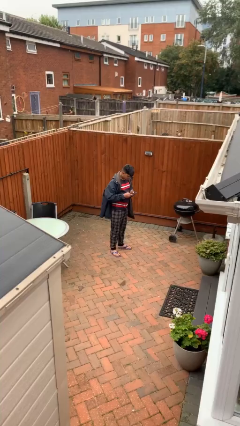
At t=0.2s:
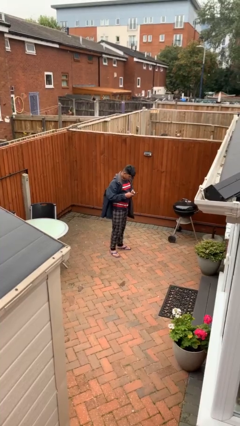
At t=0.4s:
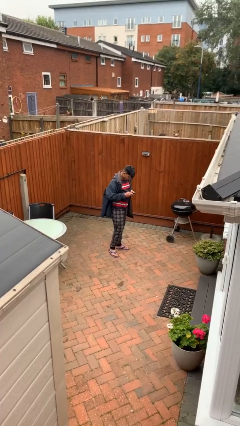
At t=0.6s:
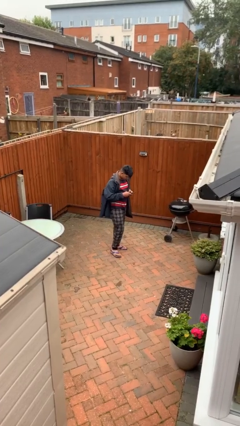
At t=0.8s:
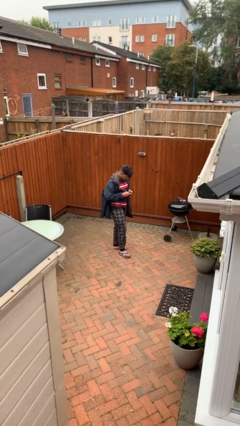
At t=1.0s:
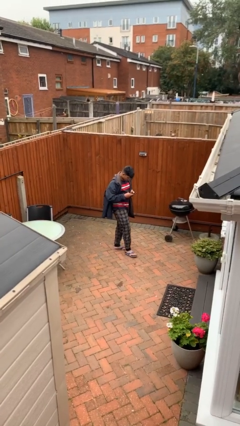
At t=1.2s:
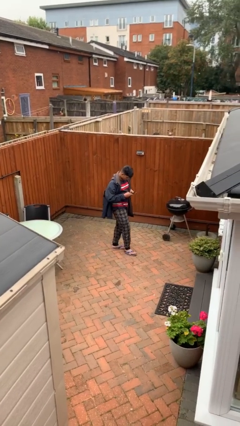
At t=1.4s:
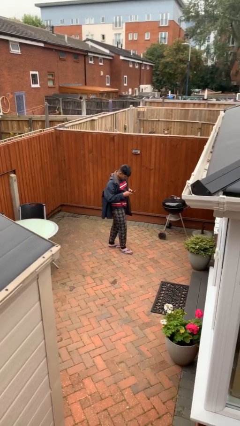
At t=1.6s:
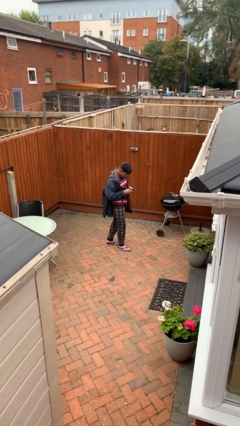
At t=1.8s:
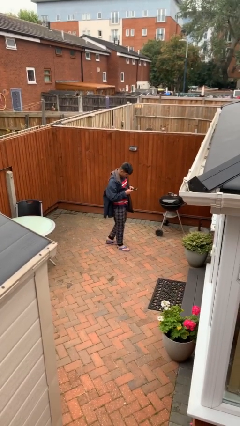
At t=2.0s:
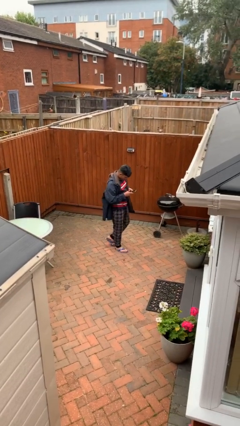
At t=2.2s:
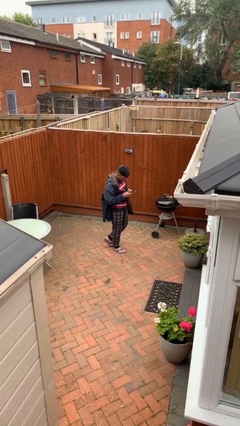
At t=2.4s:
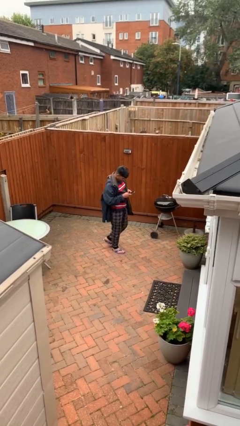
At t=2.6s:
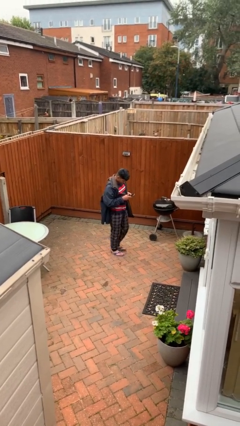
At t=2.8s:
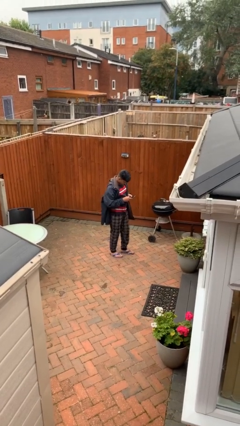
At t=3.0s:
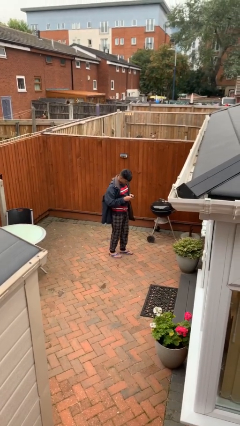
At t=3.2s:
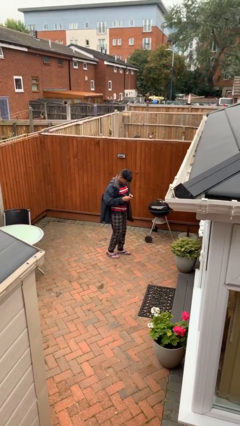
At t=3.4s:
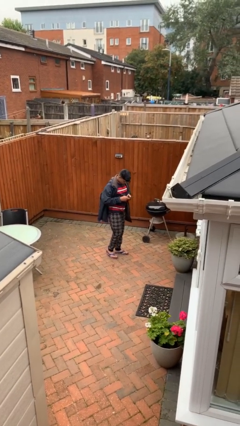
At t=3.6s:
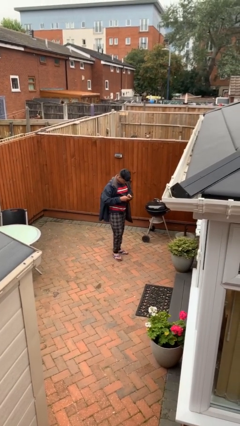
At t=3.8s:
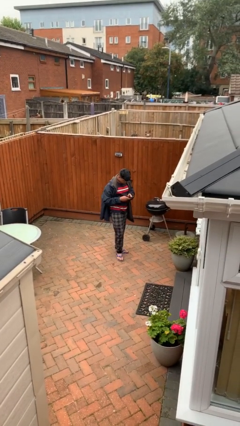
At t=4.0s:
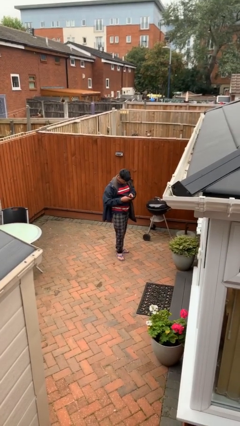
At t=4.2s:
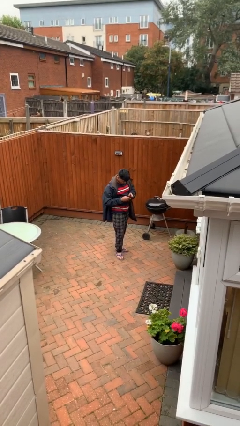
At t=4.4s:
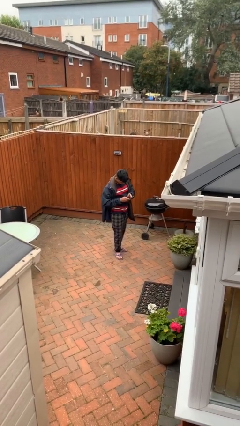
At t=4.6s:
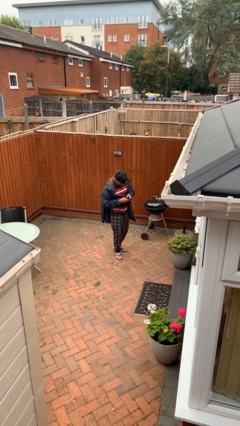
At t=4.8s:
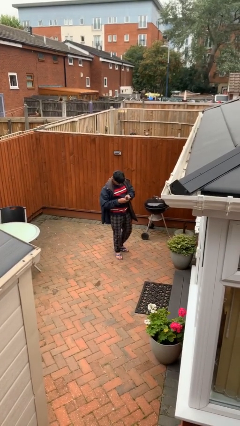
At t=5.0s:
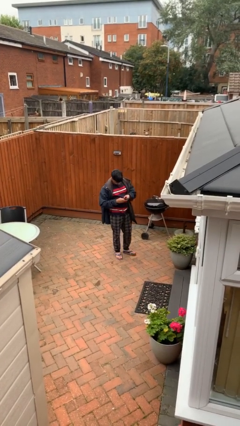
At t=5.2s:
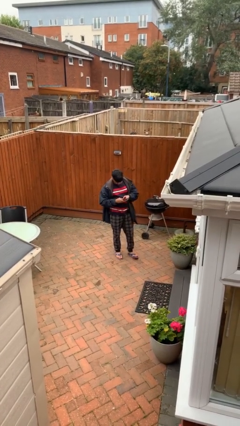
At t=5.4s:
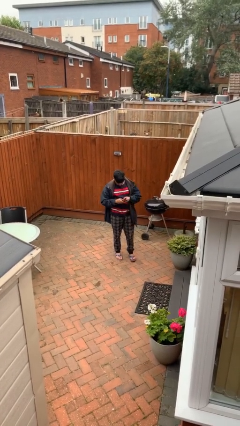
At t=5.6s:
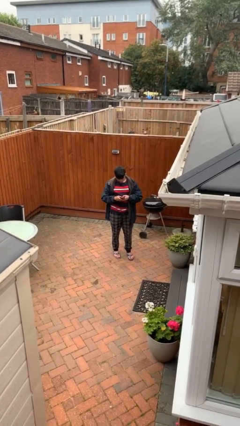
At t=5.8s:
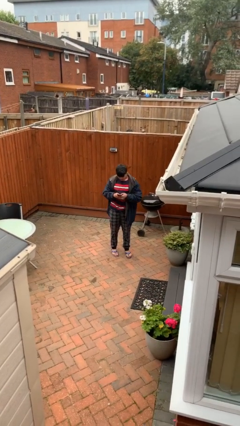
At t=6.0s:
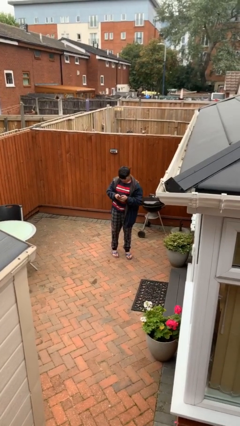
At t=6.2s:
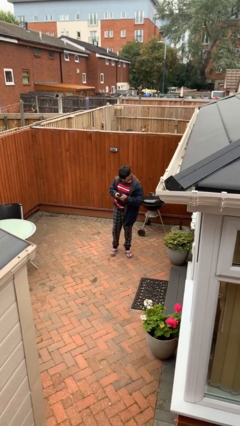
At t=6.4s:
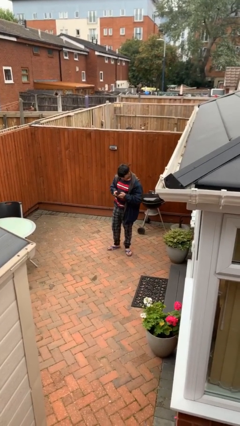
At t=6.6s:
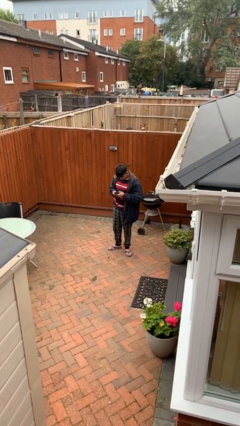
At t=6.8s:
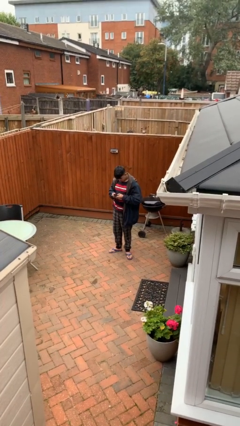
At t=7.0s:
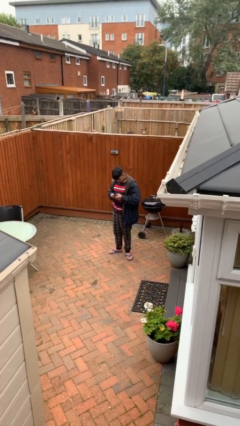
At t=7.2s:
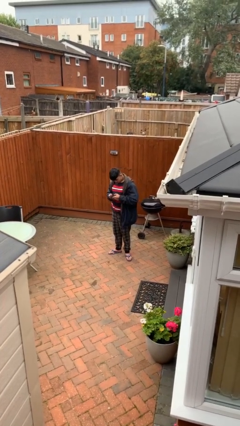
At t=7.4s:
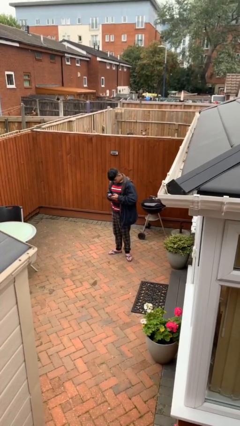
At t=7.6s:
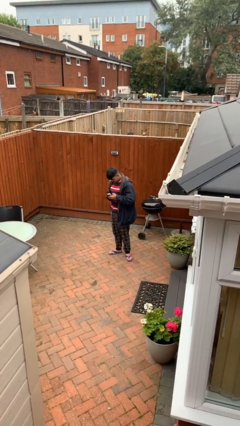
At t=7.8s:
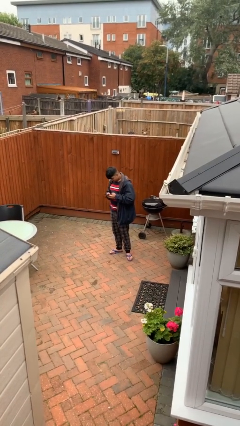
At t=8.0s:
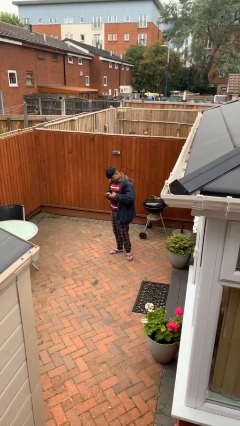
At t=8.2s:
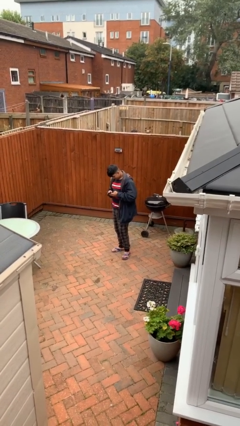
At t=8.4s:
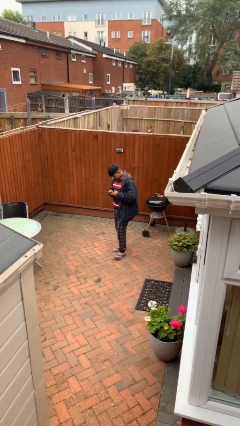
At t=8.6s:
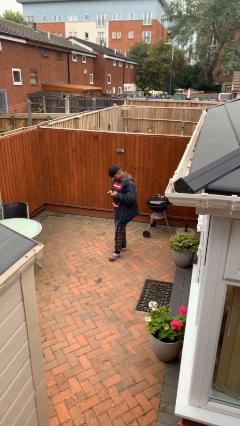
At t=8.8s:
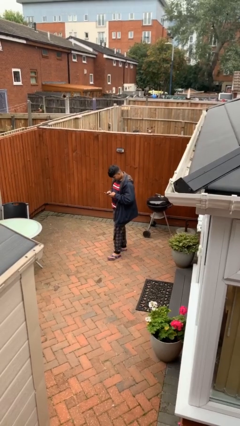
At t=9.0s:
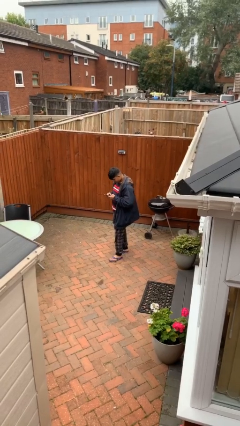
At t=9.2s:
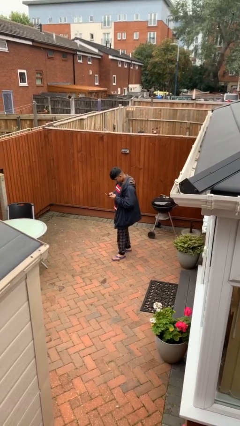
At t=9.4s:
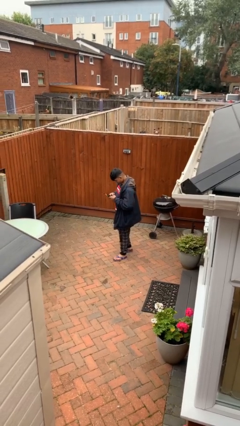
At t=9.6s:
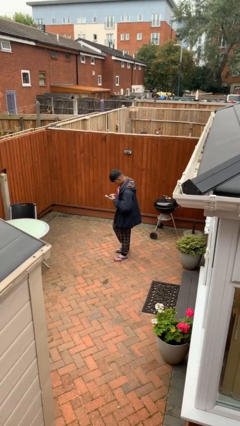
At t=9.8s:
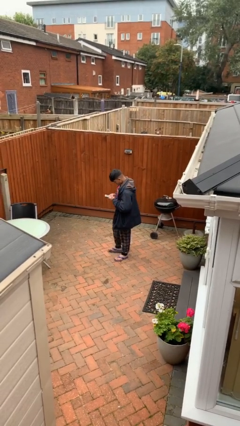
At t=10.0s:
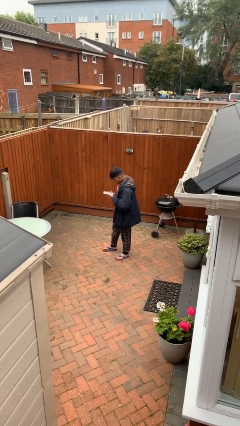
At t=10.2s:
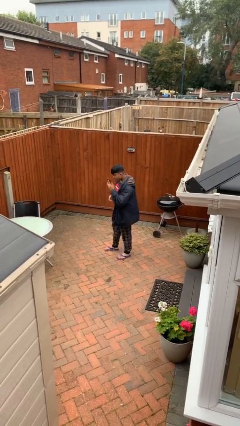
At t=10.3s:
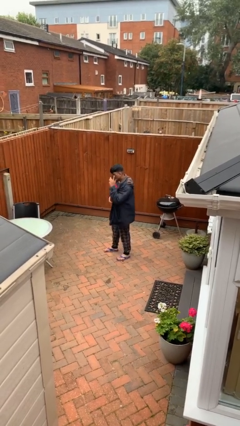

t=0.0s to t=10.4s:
person texts on phone

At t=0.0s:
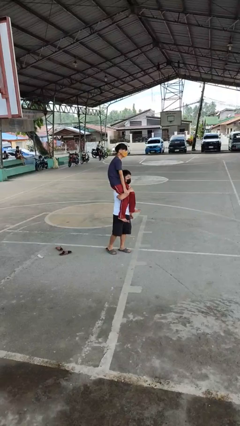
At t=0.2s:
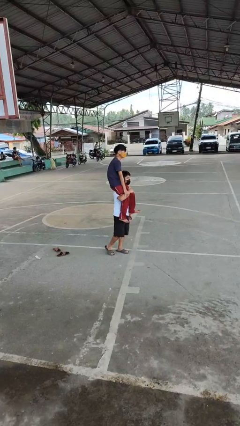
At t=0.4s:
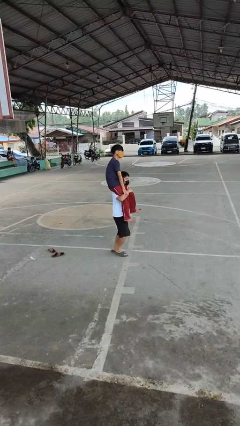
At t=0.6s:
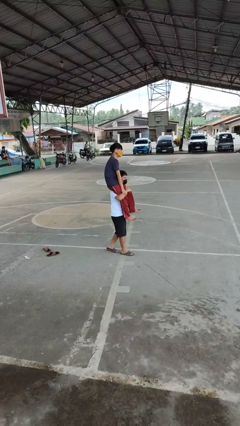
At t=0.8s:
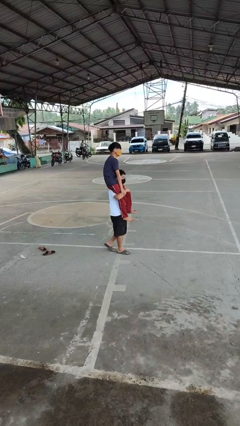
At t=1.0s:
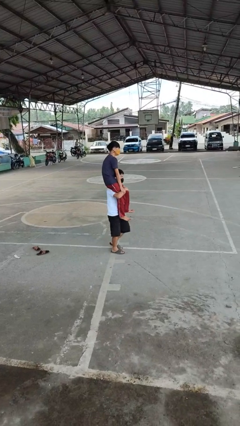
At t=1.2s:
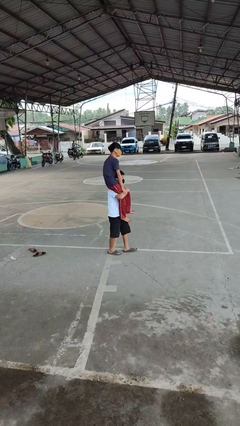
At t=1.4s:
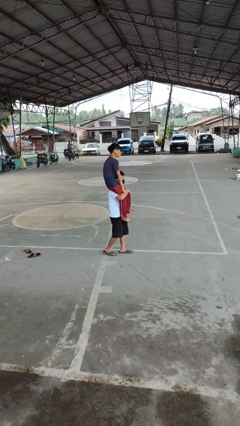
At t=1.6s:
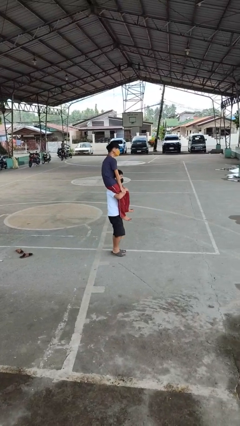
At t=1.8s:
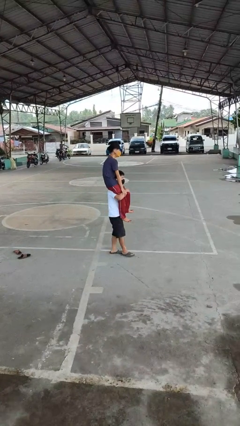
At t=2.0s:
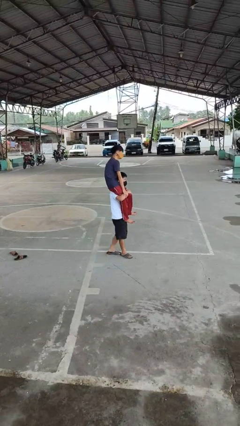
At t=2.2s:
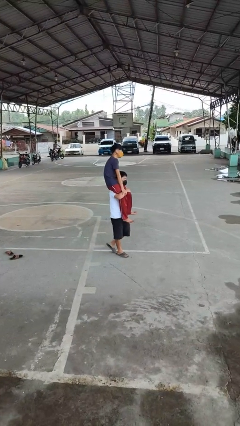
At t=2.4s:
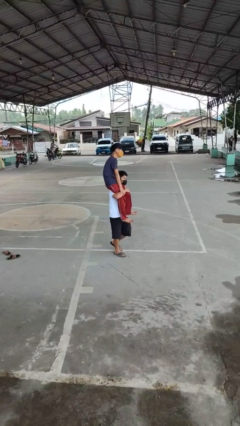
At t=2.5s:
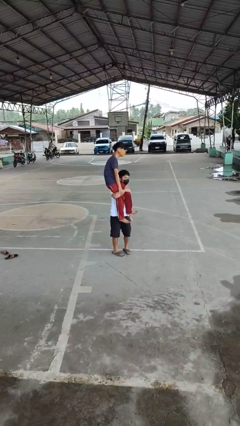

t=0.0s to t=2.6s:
person carries person on shoulders

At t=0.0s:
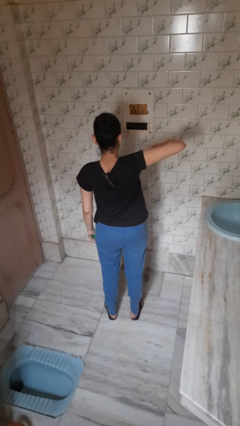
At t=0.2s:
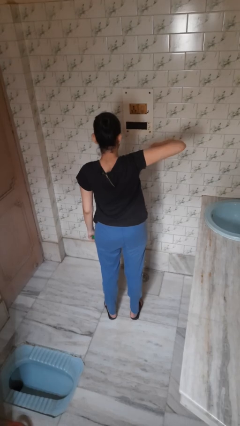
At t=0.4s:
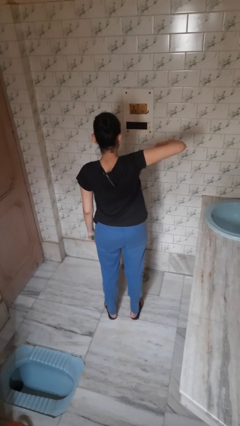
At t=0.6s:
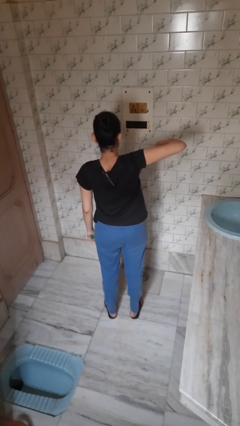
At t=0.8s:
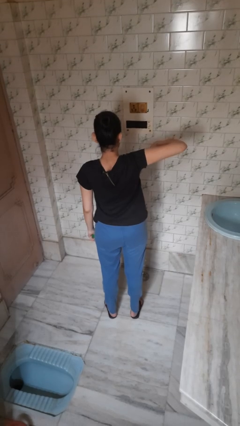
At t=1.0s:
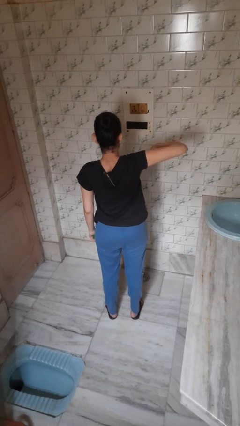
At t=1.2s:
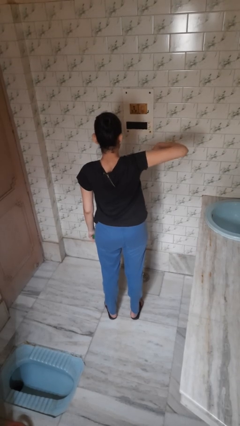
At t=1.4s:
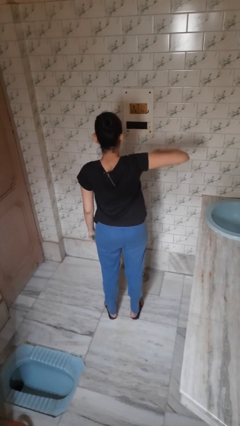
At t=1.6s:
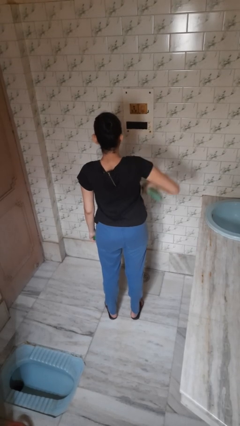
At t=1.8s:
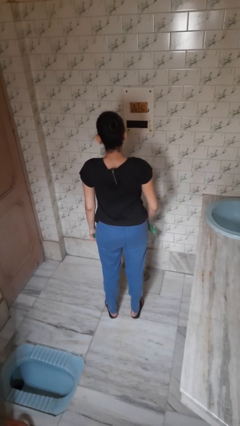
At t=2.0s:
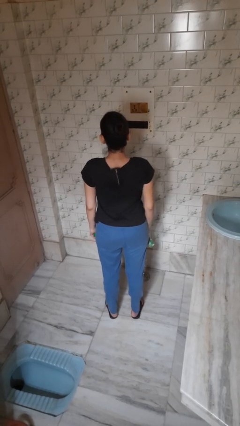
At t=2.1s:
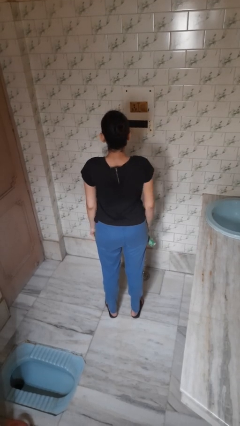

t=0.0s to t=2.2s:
person applies deodorant

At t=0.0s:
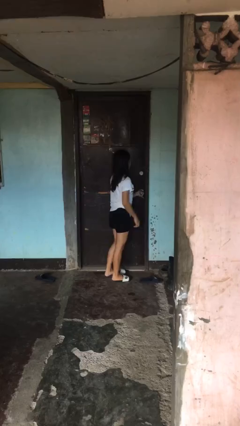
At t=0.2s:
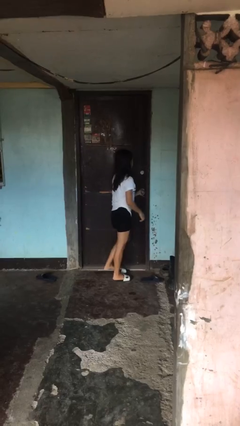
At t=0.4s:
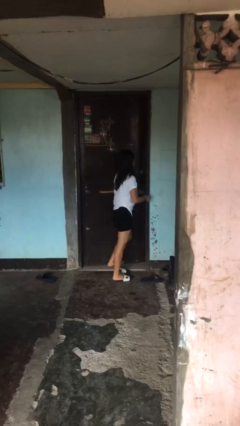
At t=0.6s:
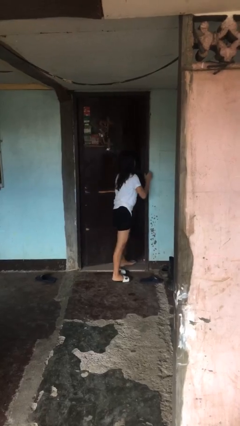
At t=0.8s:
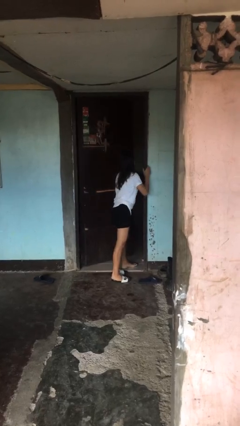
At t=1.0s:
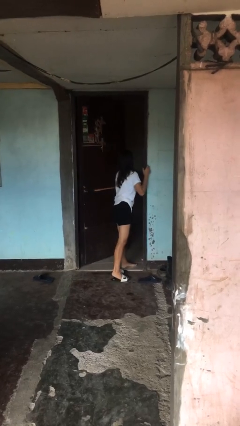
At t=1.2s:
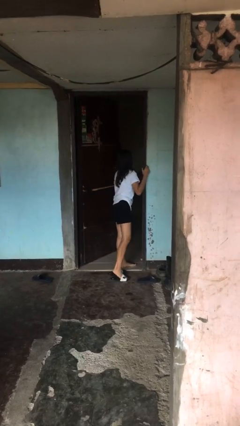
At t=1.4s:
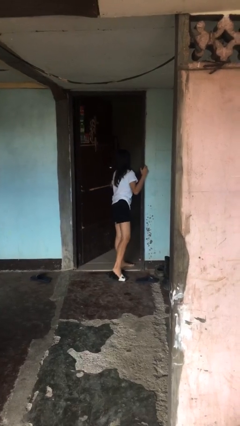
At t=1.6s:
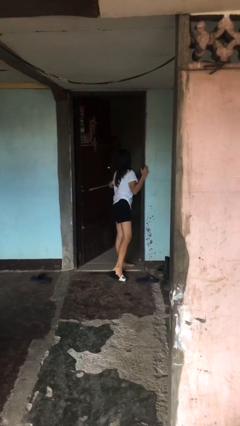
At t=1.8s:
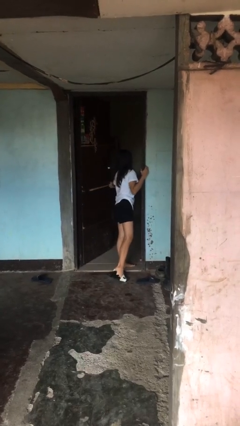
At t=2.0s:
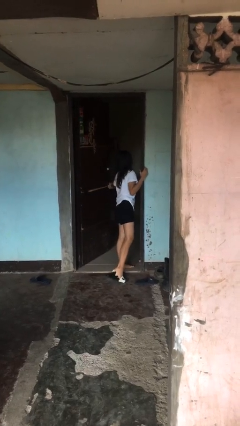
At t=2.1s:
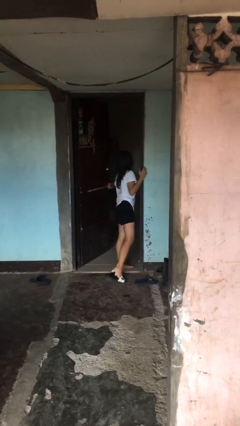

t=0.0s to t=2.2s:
person opens facility door

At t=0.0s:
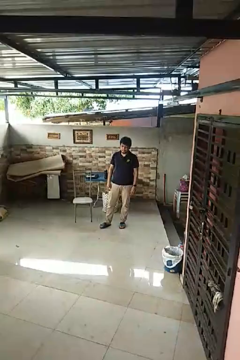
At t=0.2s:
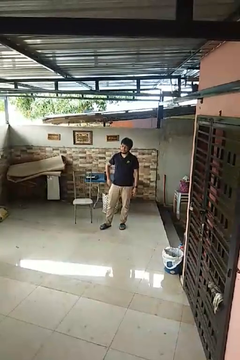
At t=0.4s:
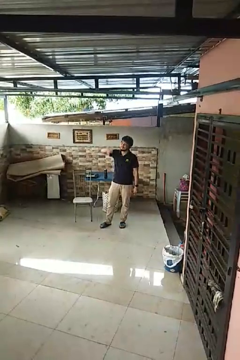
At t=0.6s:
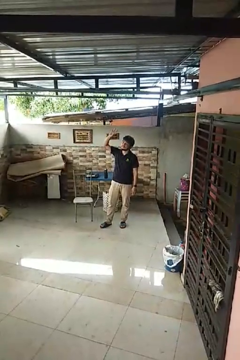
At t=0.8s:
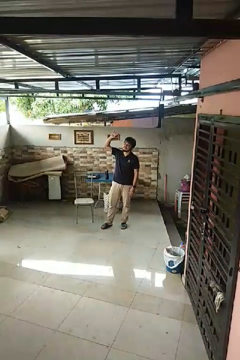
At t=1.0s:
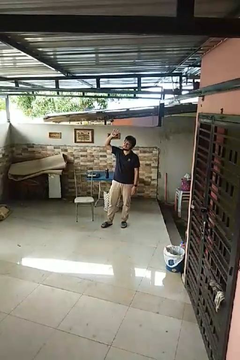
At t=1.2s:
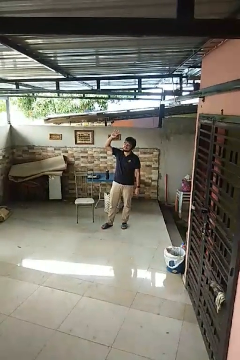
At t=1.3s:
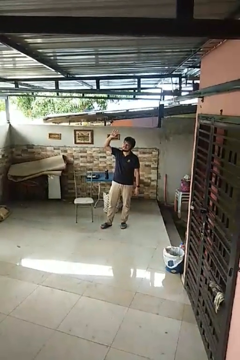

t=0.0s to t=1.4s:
person gestures swipe up
